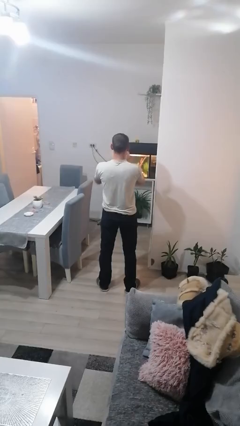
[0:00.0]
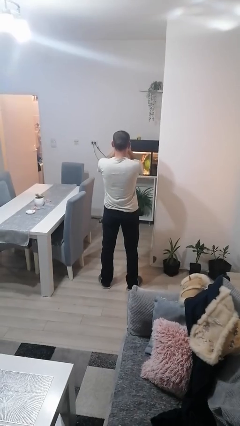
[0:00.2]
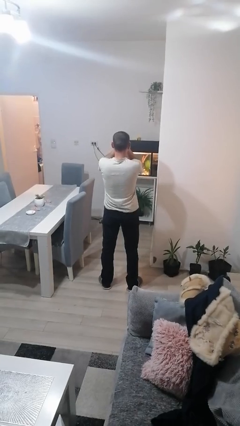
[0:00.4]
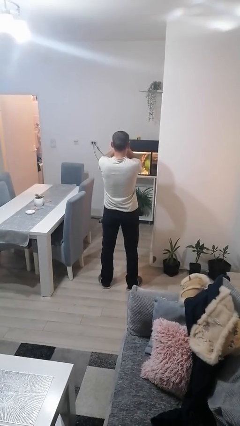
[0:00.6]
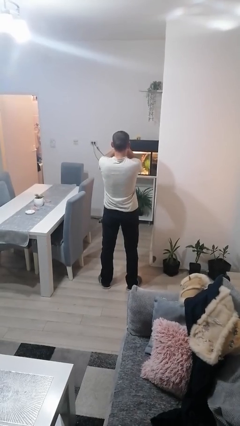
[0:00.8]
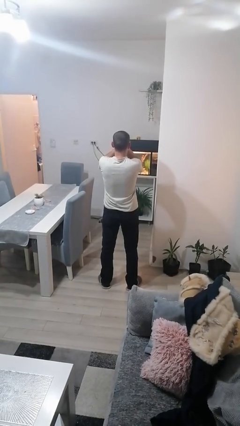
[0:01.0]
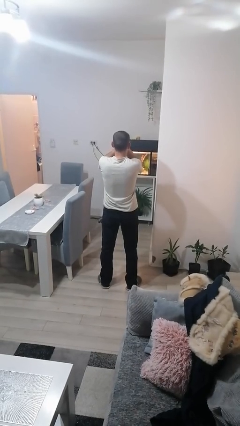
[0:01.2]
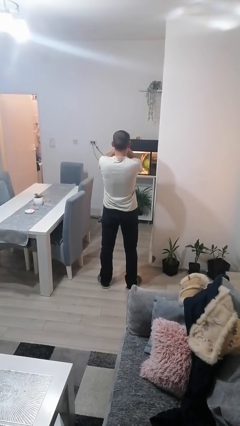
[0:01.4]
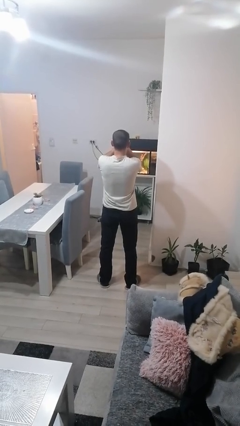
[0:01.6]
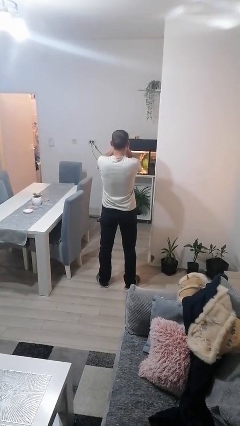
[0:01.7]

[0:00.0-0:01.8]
person covers face with hands

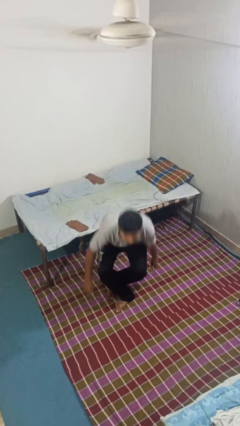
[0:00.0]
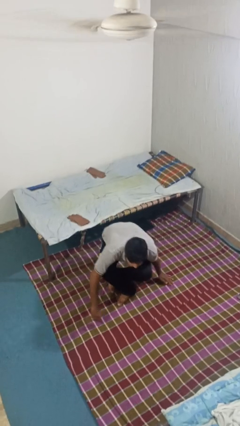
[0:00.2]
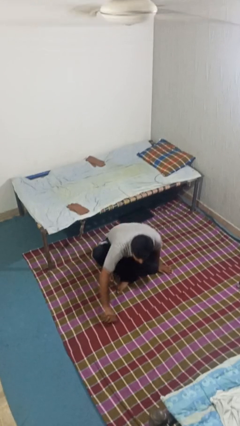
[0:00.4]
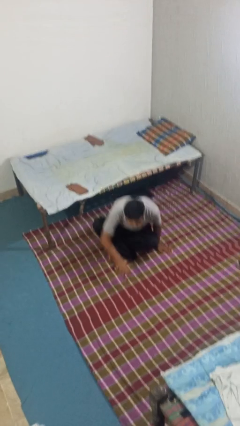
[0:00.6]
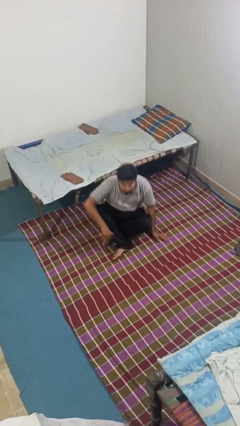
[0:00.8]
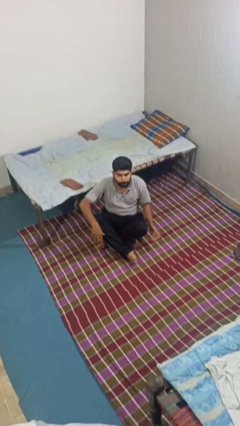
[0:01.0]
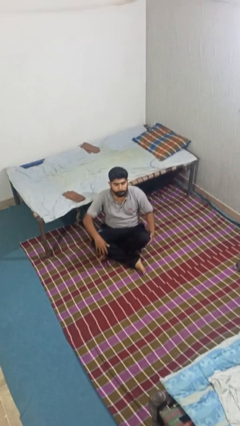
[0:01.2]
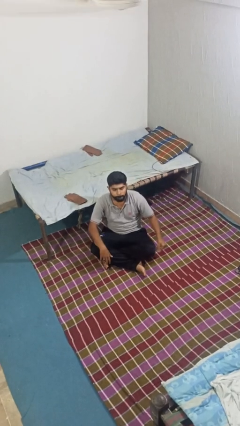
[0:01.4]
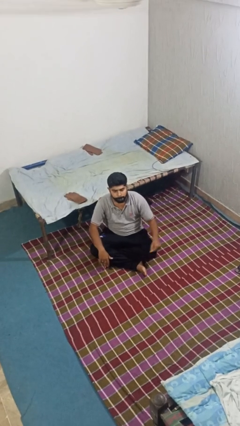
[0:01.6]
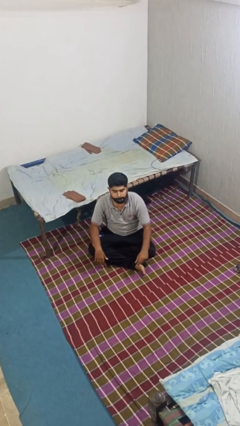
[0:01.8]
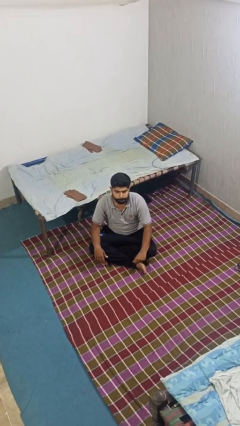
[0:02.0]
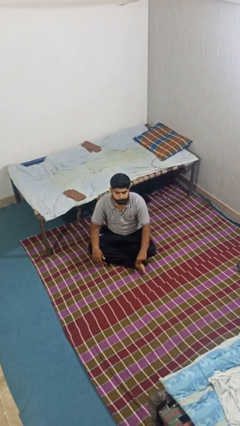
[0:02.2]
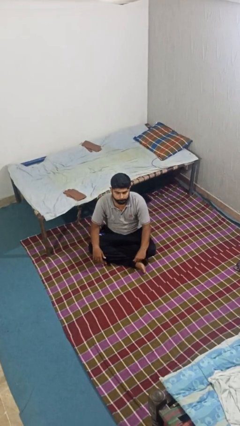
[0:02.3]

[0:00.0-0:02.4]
person sits crisscross

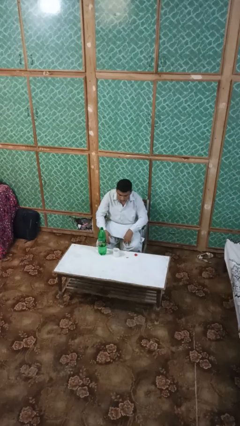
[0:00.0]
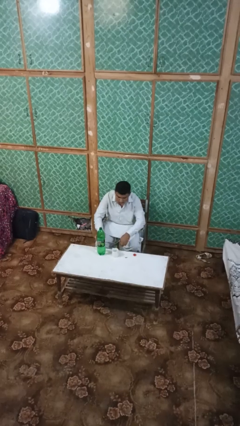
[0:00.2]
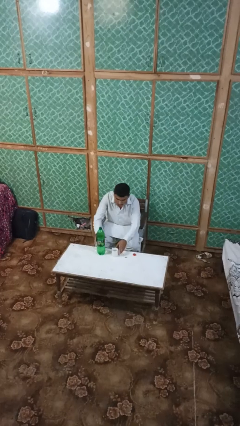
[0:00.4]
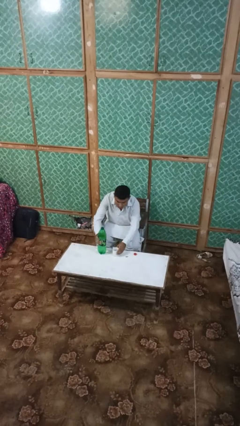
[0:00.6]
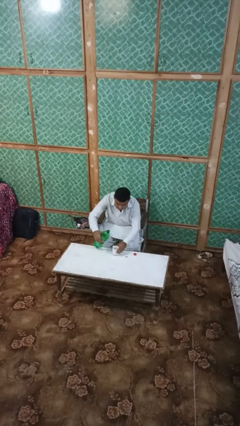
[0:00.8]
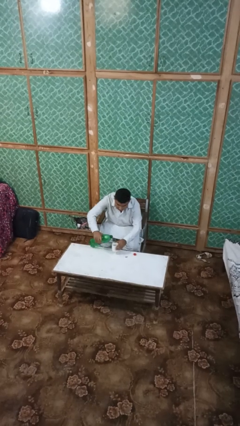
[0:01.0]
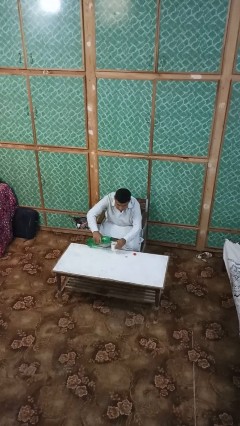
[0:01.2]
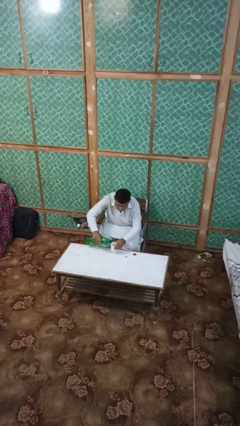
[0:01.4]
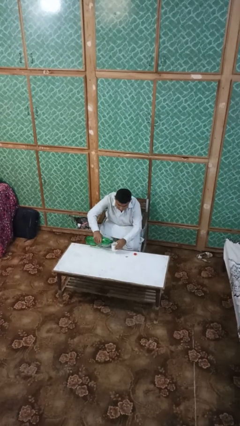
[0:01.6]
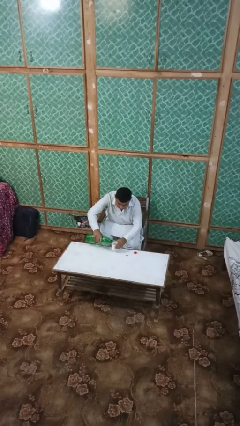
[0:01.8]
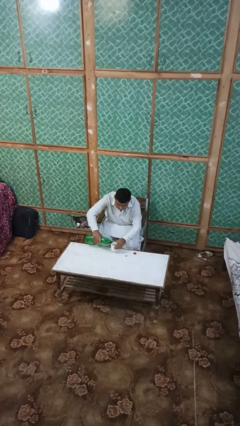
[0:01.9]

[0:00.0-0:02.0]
person pours liquid into cup

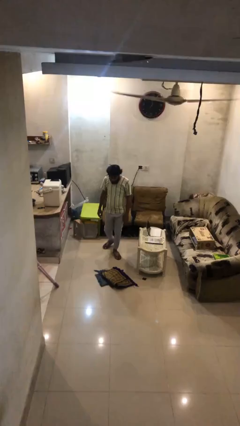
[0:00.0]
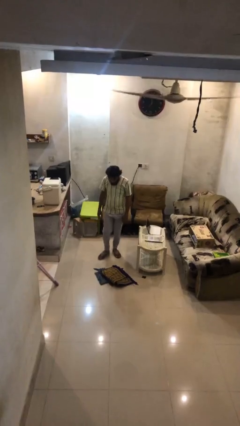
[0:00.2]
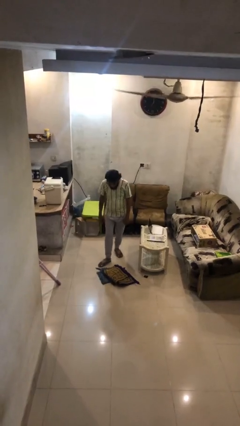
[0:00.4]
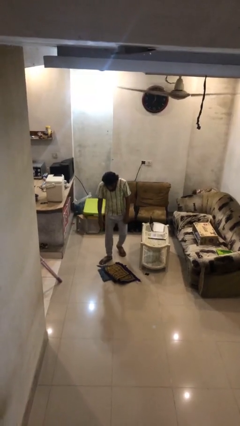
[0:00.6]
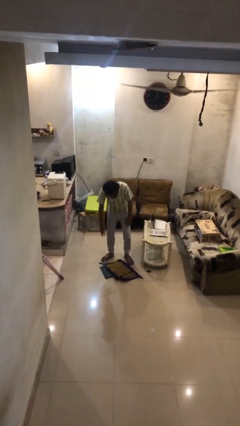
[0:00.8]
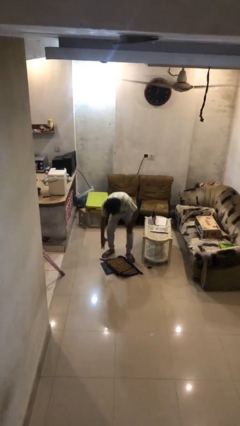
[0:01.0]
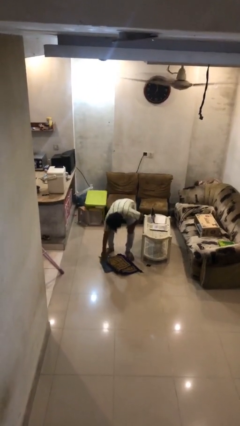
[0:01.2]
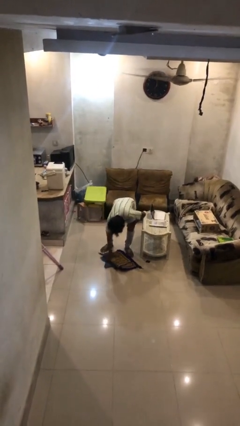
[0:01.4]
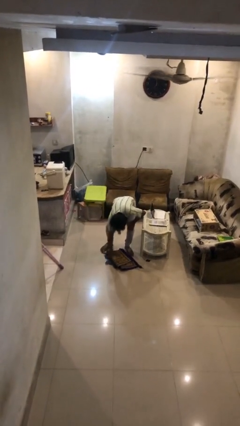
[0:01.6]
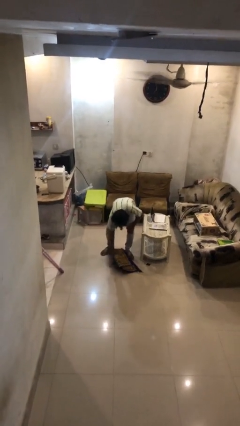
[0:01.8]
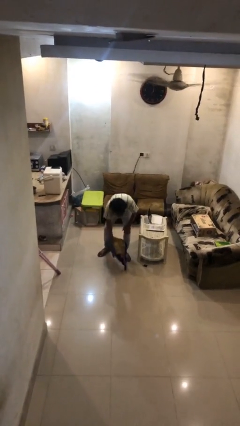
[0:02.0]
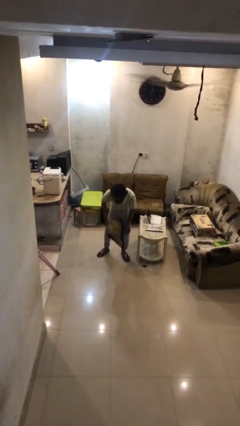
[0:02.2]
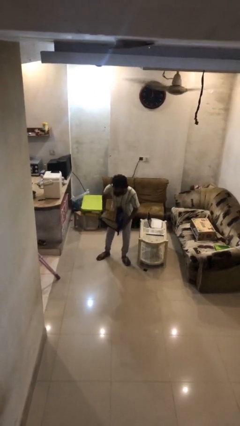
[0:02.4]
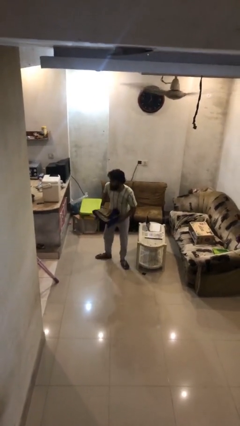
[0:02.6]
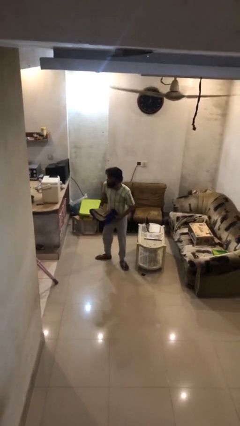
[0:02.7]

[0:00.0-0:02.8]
person picks up object from floor

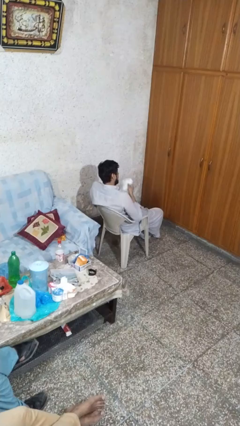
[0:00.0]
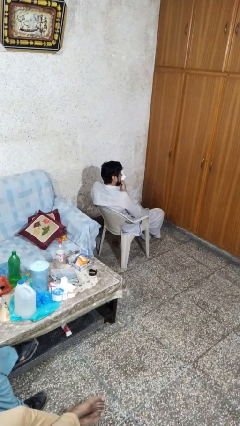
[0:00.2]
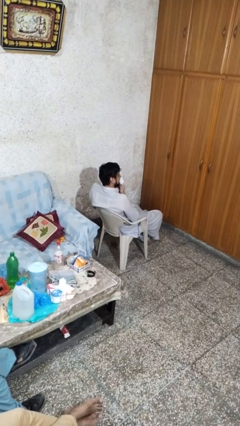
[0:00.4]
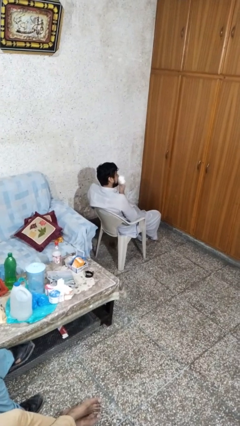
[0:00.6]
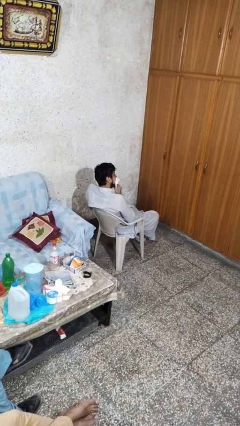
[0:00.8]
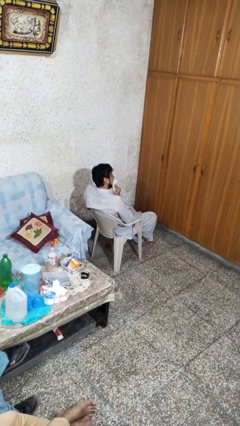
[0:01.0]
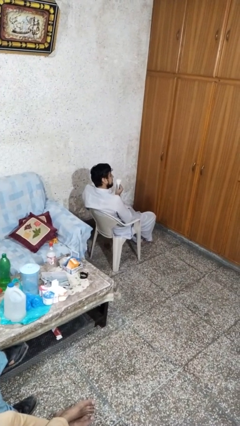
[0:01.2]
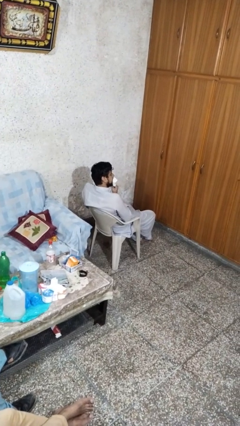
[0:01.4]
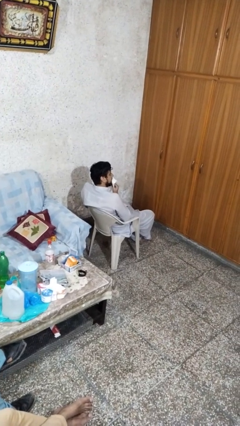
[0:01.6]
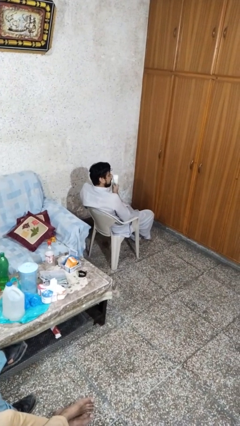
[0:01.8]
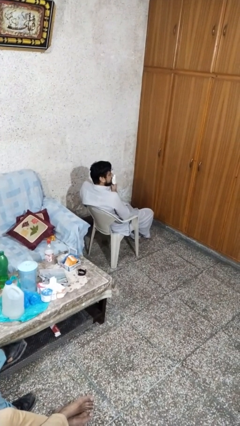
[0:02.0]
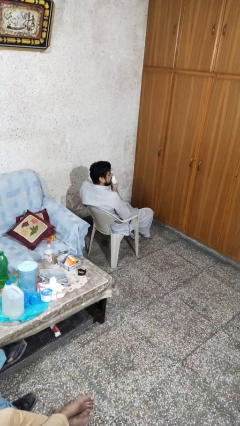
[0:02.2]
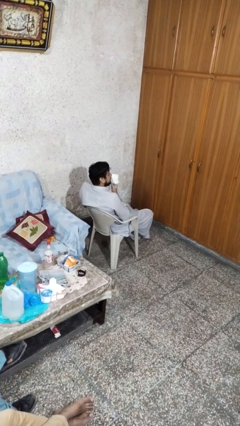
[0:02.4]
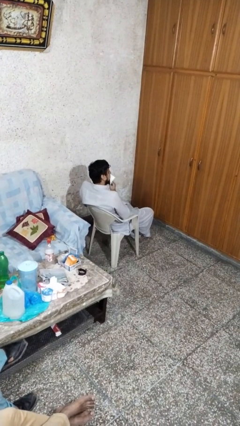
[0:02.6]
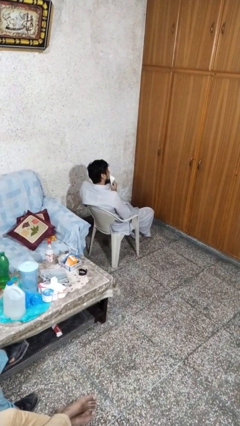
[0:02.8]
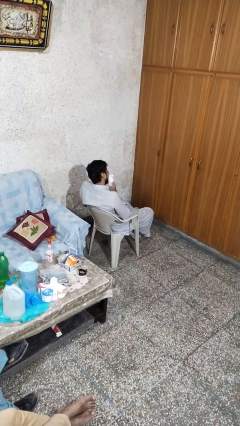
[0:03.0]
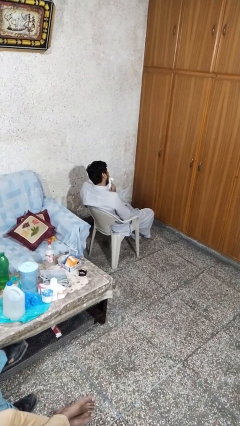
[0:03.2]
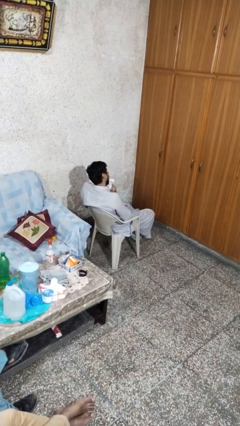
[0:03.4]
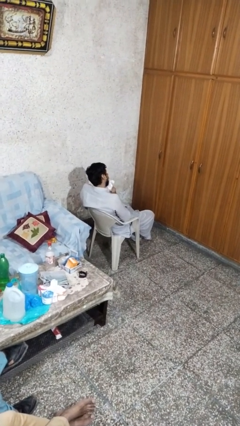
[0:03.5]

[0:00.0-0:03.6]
person wipes mouth with napkin

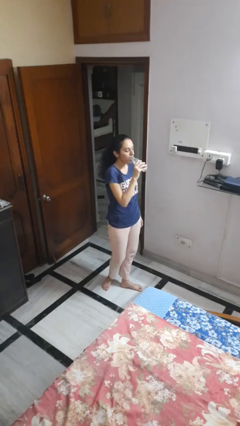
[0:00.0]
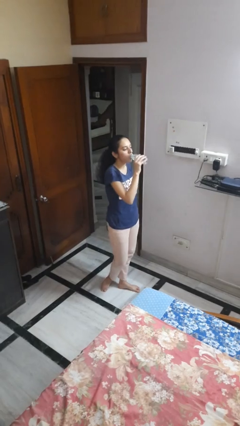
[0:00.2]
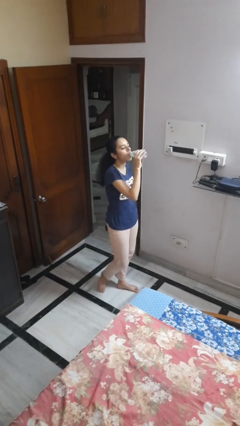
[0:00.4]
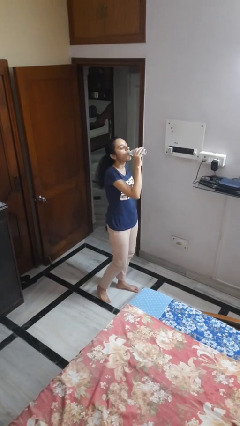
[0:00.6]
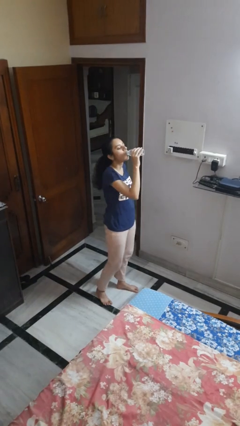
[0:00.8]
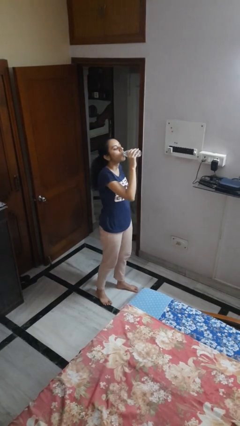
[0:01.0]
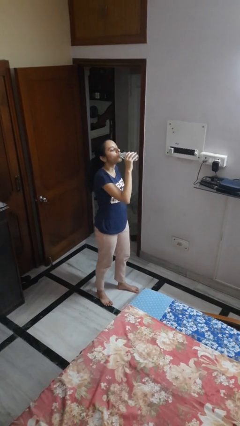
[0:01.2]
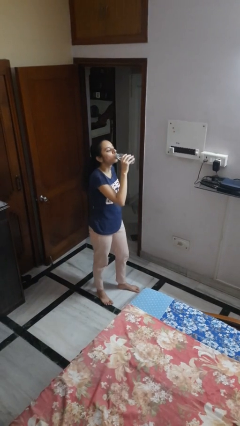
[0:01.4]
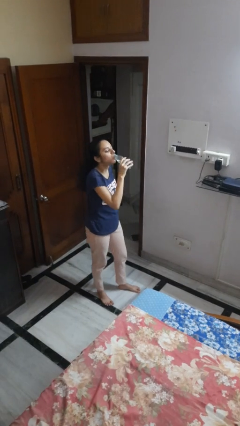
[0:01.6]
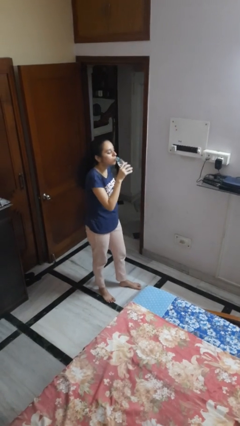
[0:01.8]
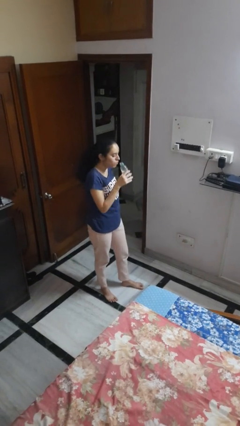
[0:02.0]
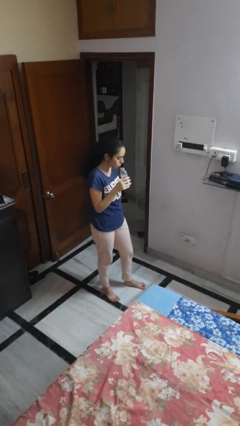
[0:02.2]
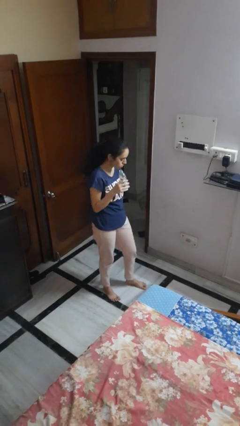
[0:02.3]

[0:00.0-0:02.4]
person drinks from bottle

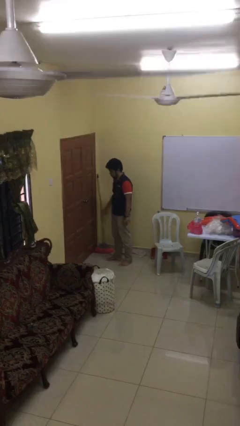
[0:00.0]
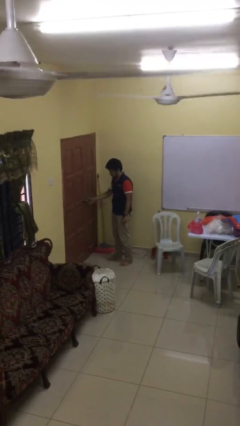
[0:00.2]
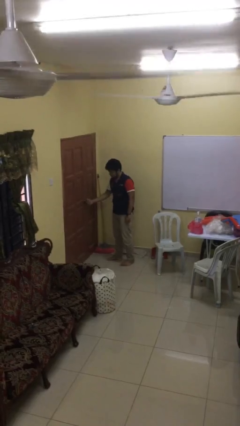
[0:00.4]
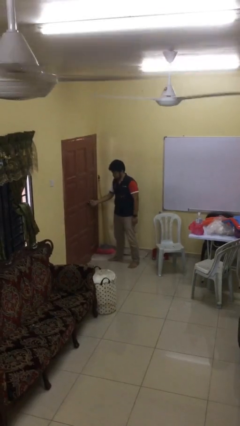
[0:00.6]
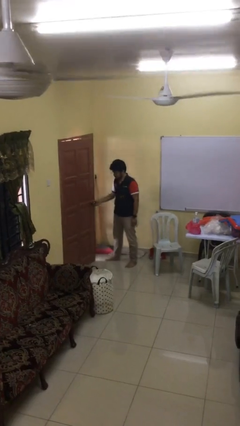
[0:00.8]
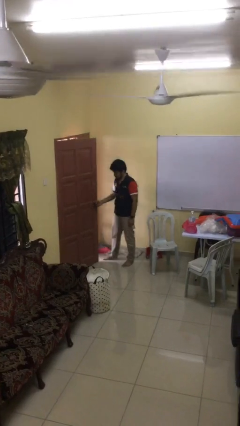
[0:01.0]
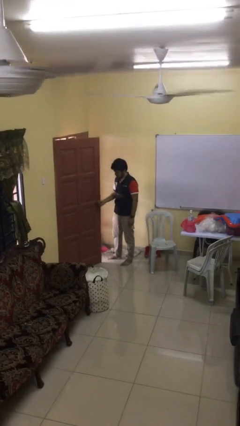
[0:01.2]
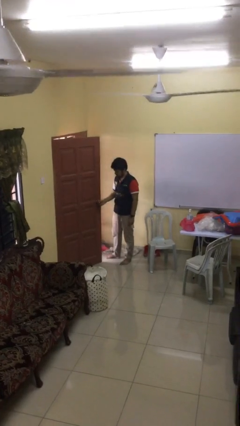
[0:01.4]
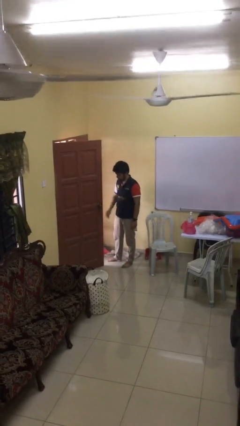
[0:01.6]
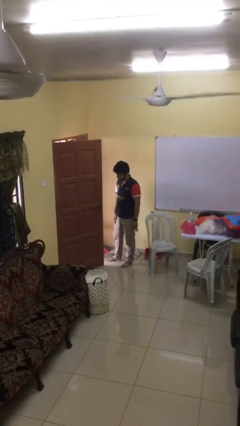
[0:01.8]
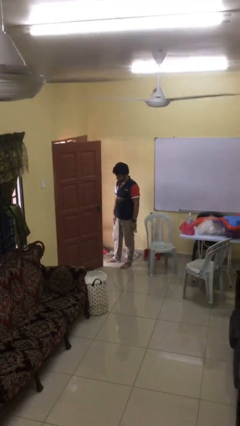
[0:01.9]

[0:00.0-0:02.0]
person opens facility door
